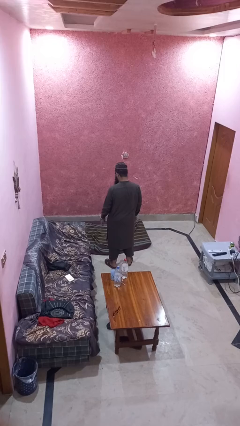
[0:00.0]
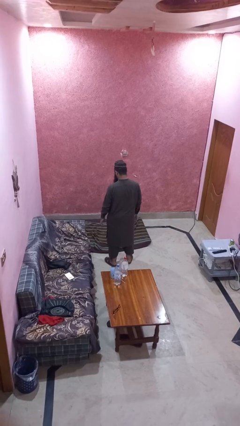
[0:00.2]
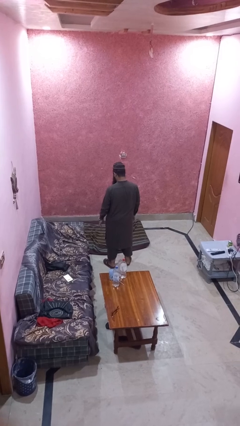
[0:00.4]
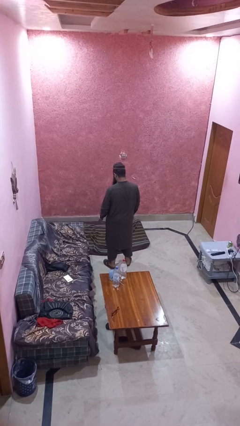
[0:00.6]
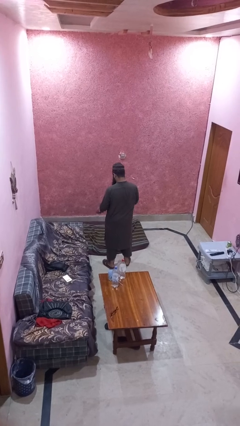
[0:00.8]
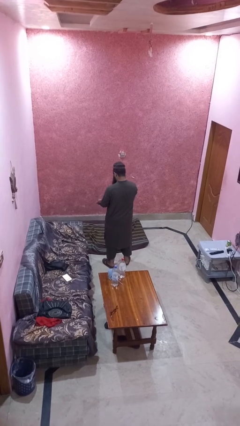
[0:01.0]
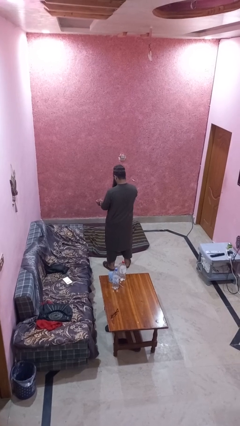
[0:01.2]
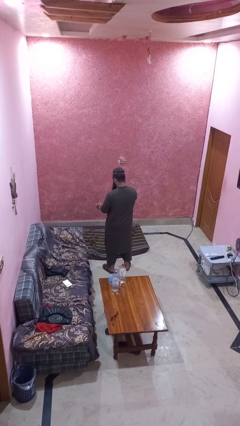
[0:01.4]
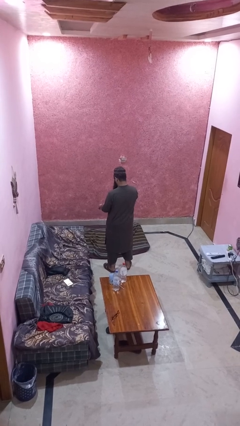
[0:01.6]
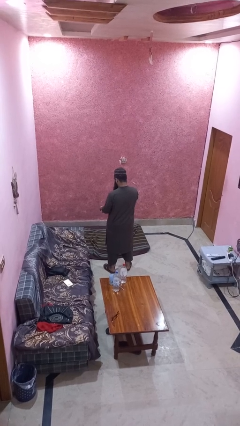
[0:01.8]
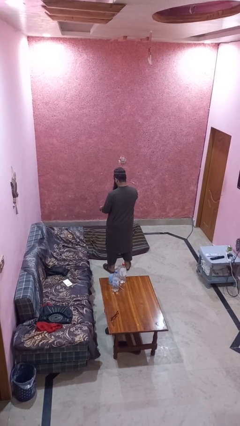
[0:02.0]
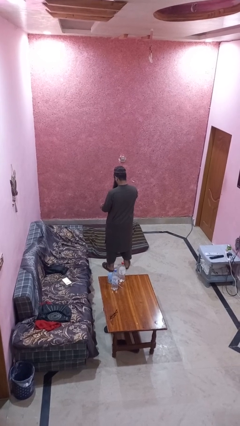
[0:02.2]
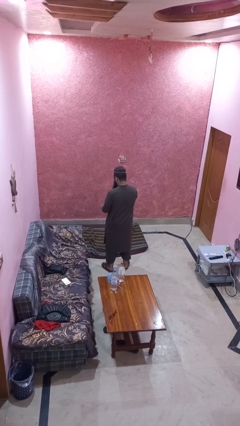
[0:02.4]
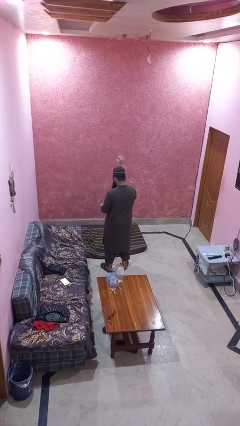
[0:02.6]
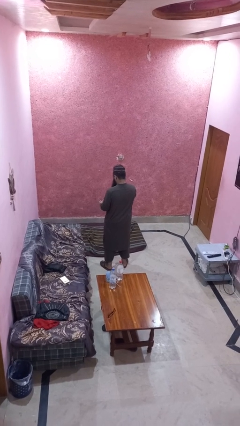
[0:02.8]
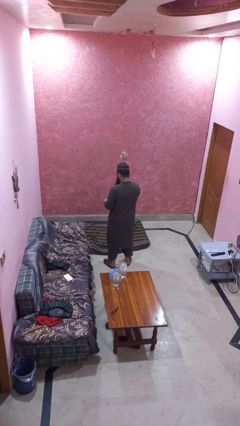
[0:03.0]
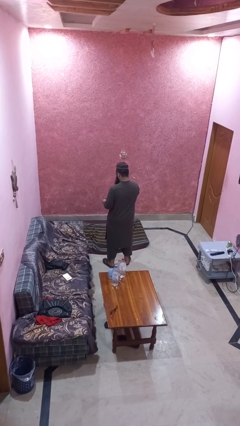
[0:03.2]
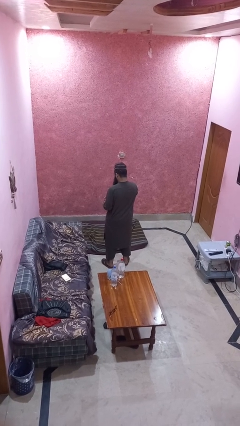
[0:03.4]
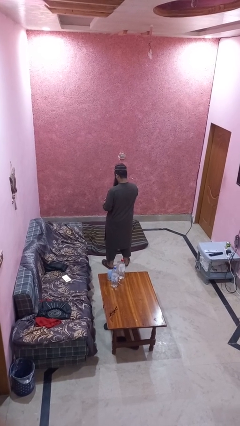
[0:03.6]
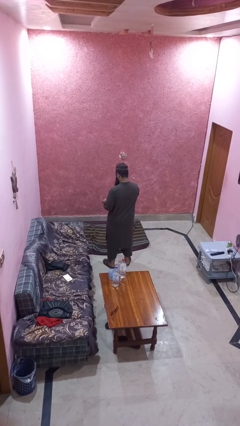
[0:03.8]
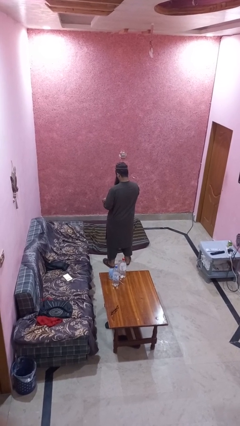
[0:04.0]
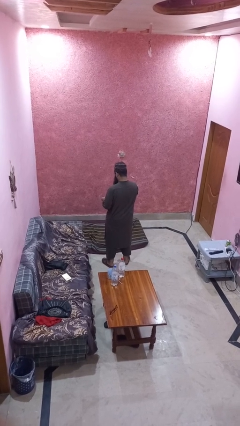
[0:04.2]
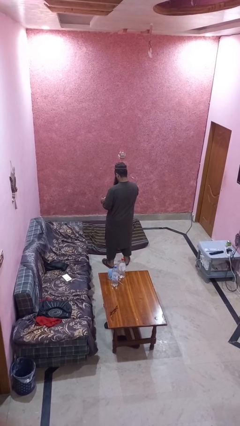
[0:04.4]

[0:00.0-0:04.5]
person takes off wristwatch

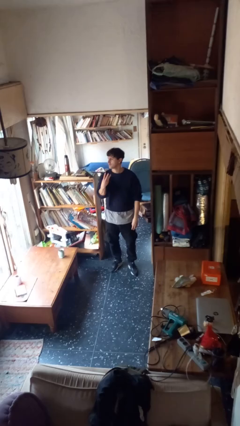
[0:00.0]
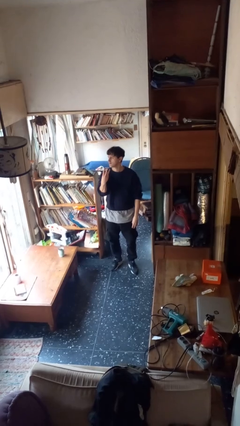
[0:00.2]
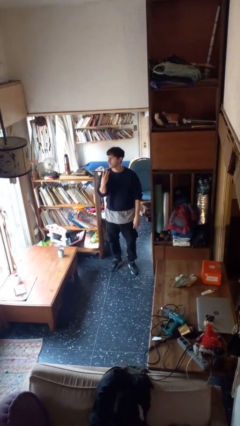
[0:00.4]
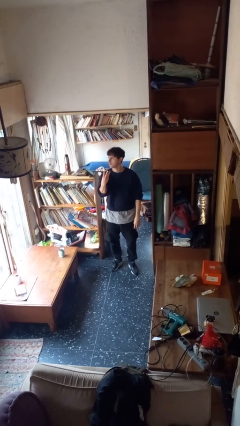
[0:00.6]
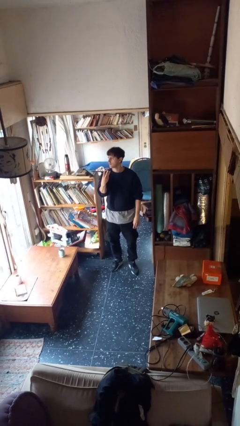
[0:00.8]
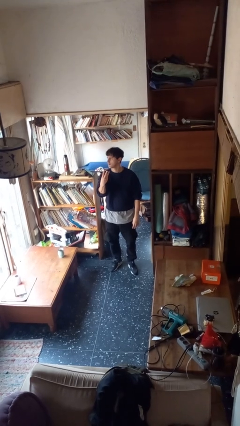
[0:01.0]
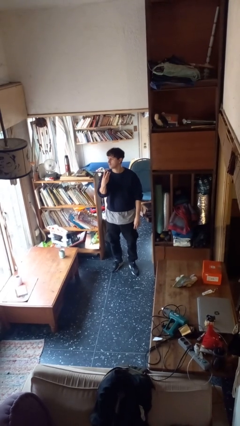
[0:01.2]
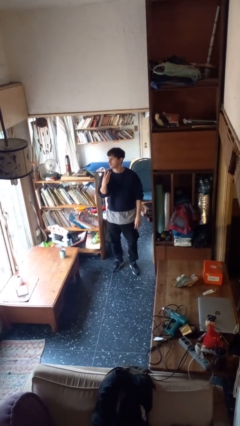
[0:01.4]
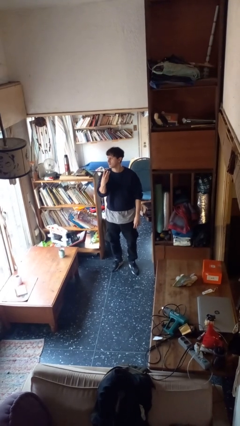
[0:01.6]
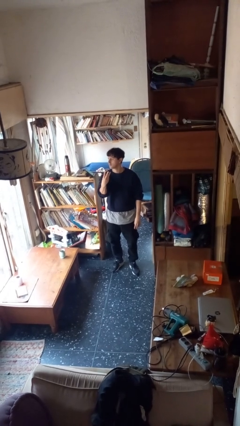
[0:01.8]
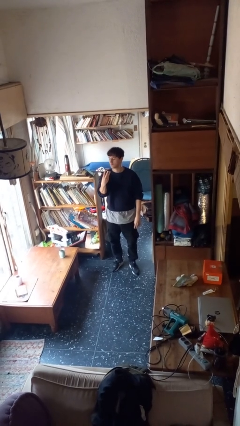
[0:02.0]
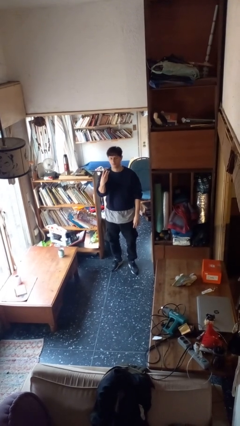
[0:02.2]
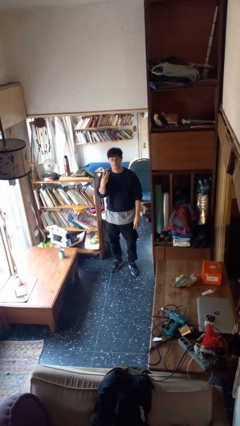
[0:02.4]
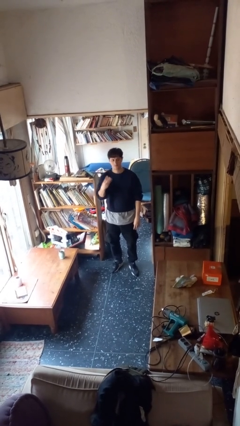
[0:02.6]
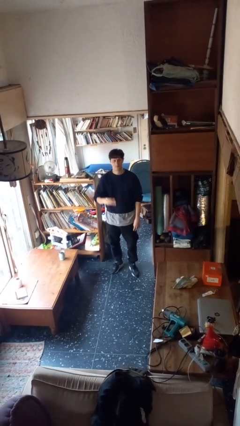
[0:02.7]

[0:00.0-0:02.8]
person gestures number three

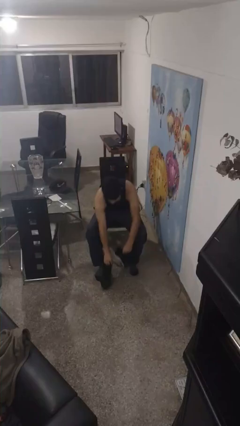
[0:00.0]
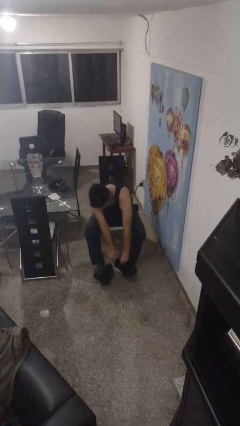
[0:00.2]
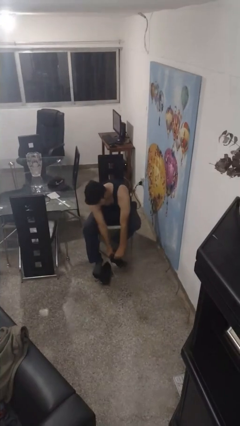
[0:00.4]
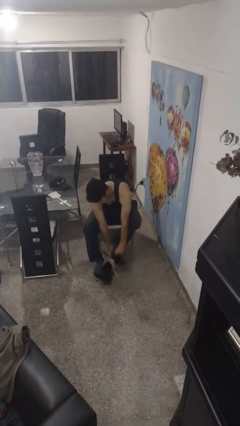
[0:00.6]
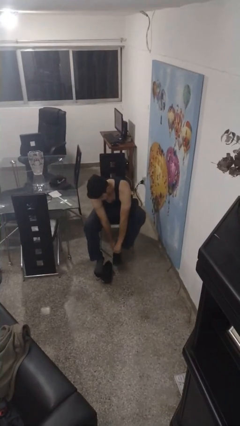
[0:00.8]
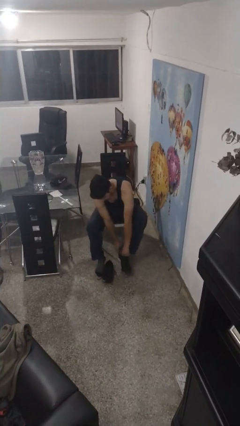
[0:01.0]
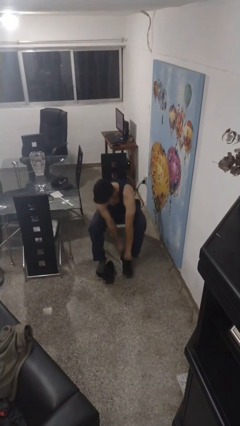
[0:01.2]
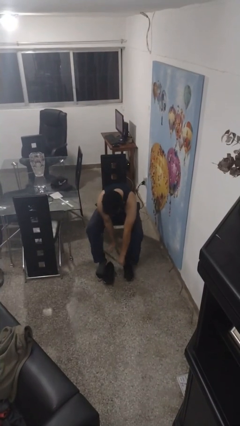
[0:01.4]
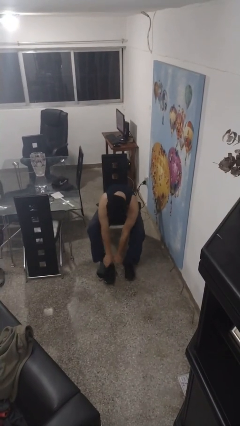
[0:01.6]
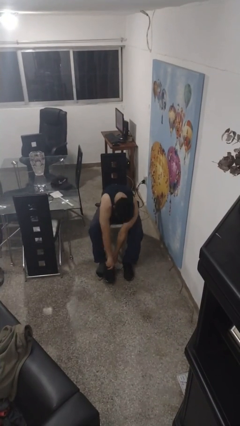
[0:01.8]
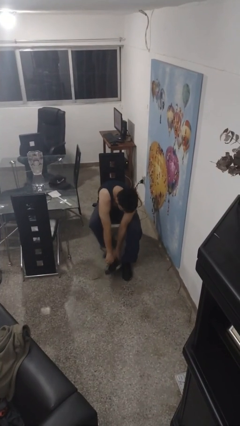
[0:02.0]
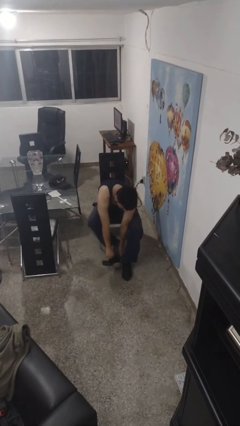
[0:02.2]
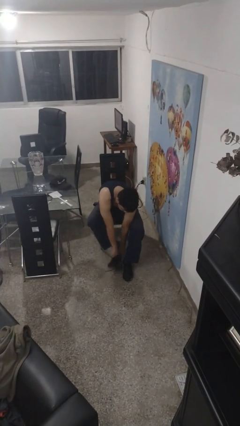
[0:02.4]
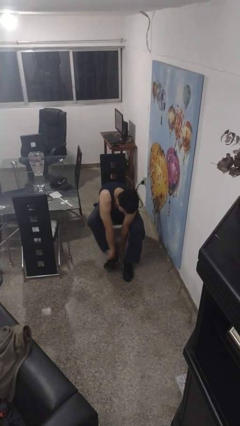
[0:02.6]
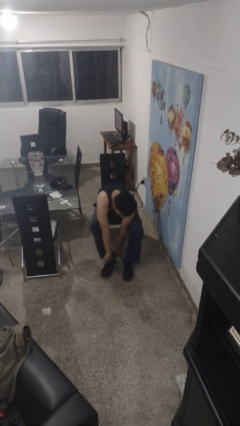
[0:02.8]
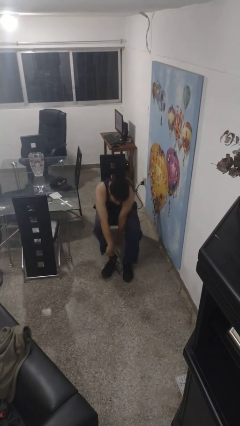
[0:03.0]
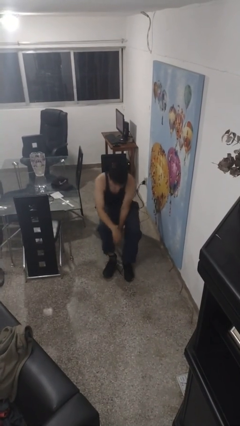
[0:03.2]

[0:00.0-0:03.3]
person puts on shoes

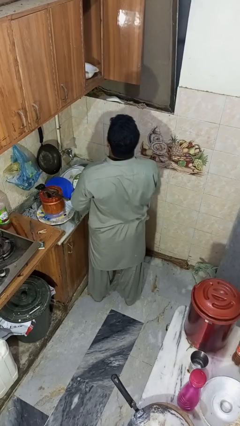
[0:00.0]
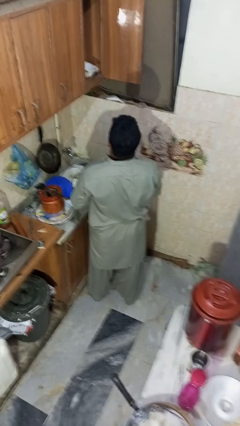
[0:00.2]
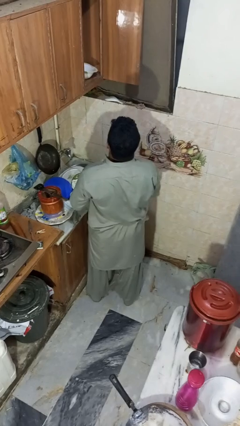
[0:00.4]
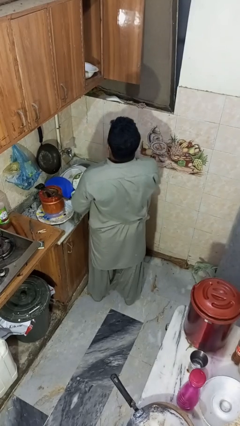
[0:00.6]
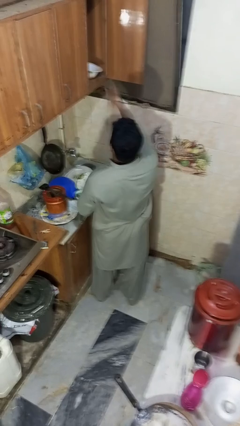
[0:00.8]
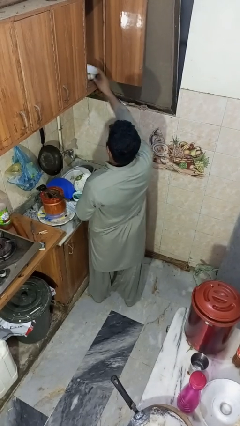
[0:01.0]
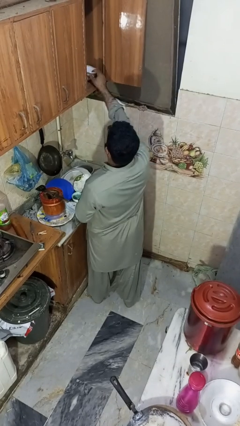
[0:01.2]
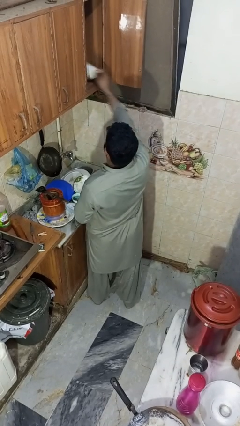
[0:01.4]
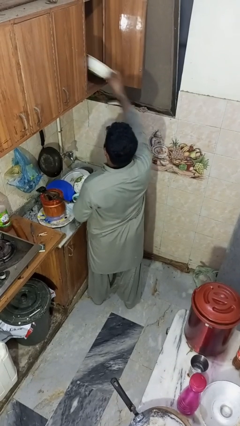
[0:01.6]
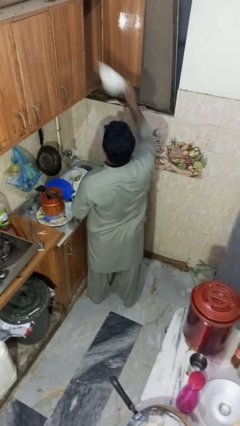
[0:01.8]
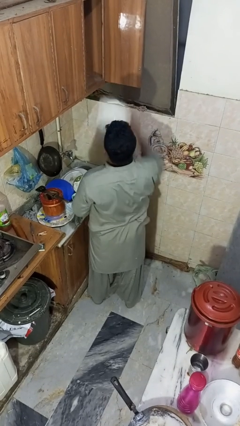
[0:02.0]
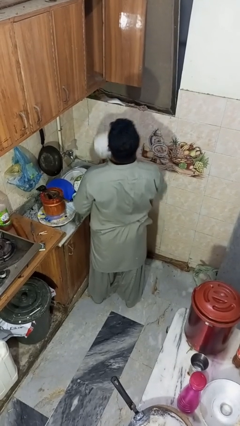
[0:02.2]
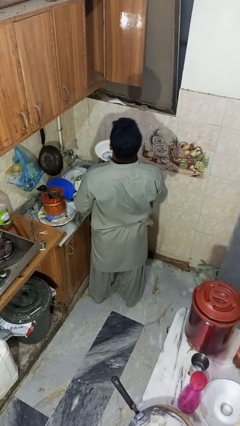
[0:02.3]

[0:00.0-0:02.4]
person takes object from cabinet

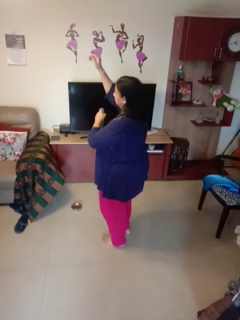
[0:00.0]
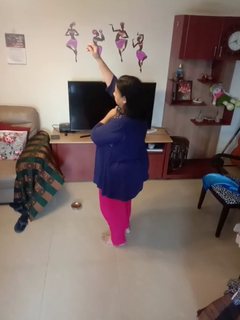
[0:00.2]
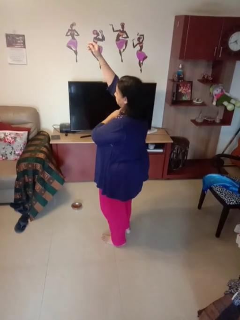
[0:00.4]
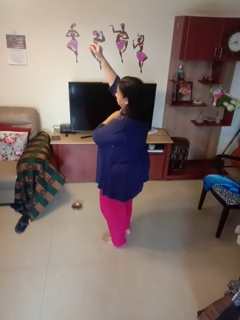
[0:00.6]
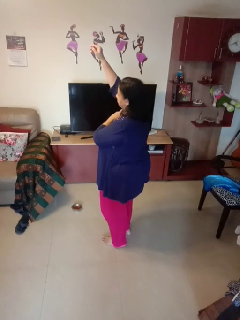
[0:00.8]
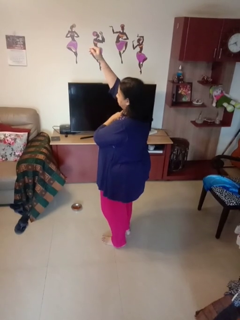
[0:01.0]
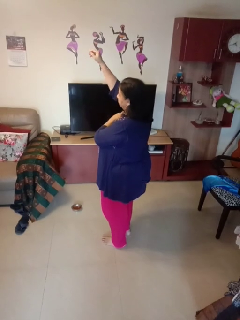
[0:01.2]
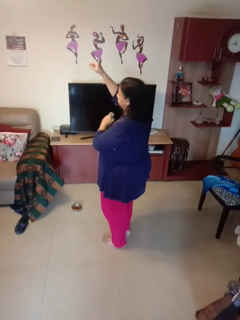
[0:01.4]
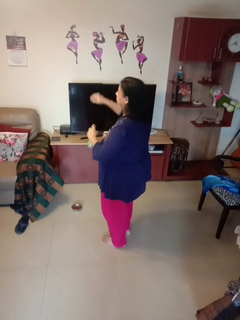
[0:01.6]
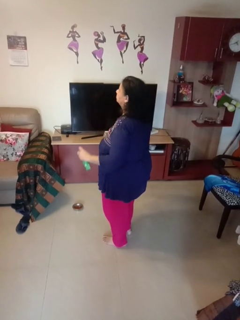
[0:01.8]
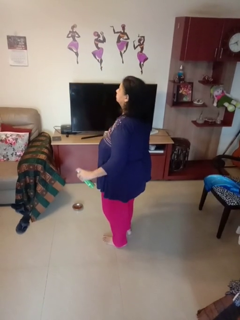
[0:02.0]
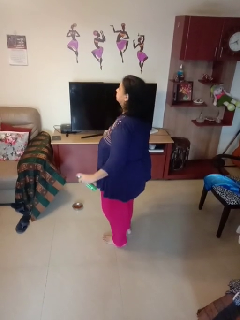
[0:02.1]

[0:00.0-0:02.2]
person applies deodorant

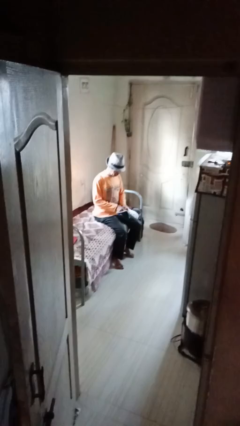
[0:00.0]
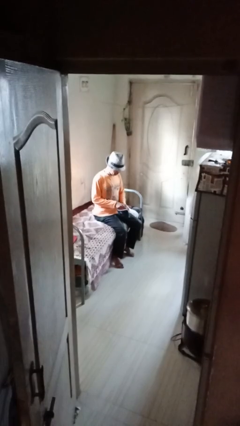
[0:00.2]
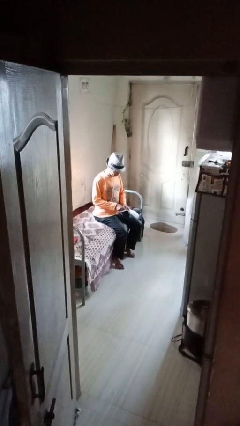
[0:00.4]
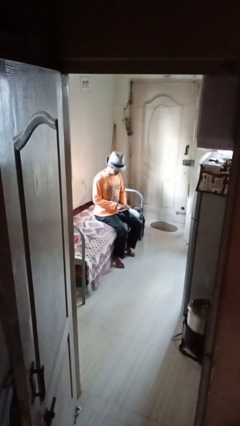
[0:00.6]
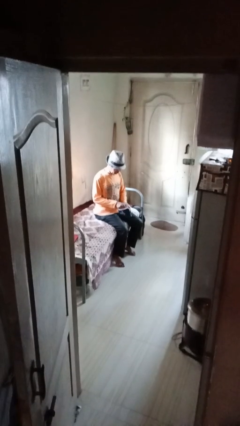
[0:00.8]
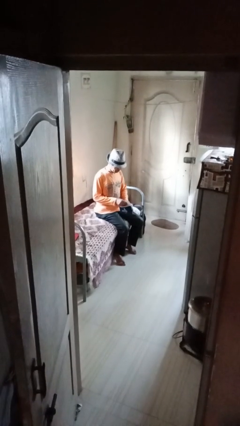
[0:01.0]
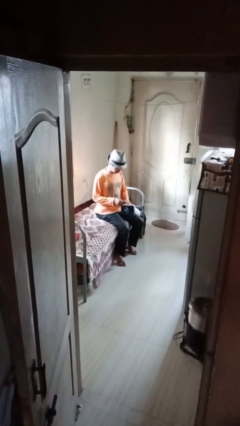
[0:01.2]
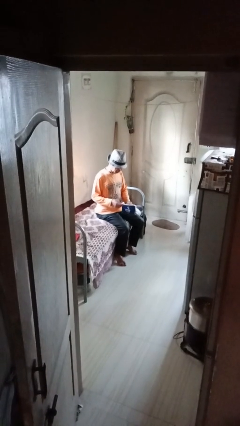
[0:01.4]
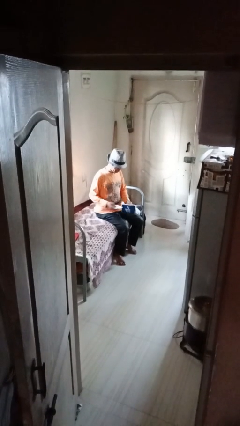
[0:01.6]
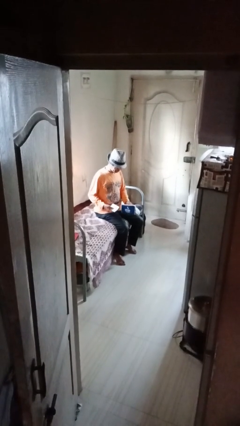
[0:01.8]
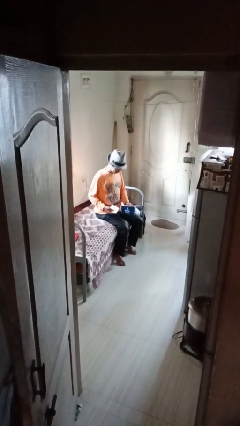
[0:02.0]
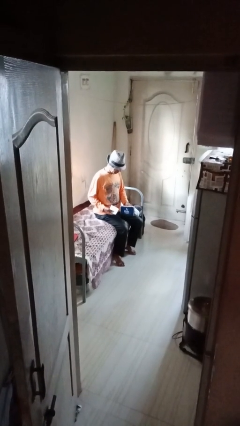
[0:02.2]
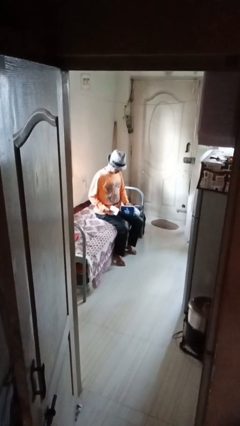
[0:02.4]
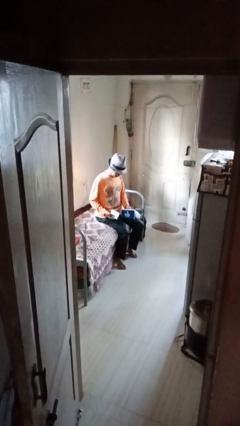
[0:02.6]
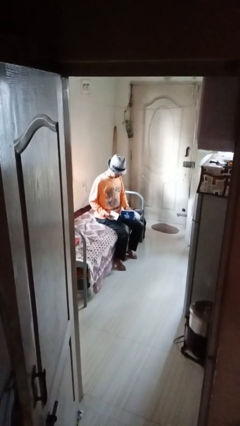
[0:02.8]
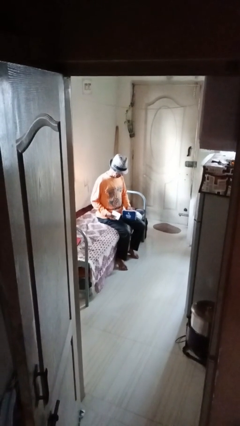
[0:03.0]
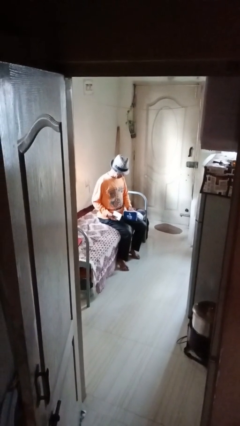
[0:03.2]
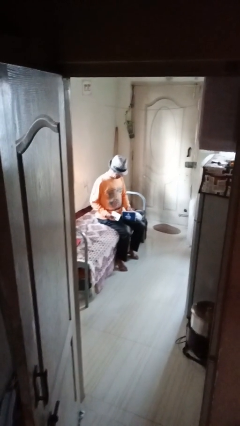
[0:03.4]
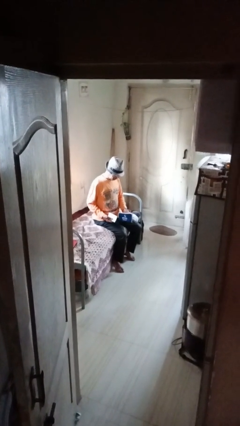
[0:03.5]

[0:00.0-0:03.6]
person takes object from purse
